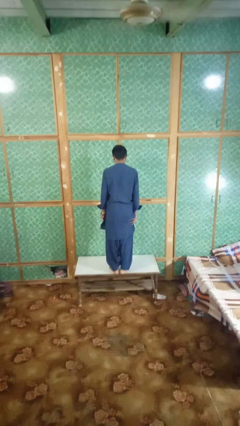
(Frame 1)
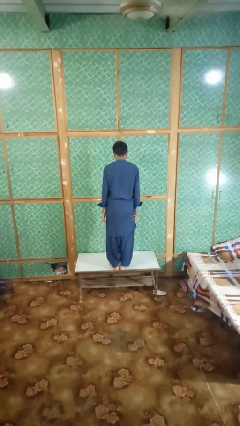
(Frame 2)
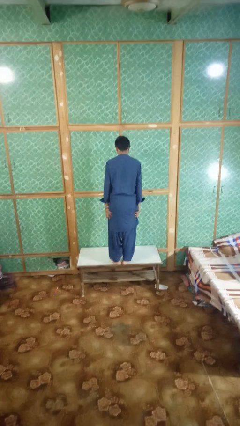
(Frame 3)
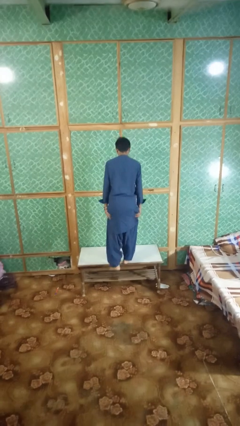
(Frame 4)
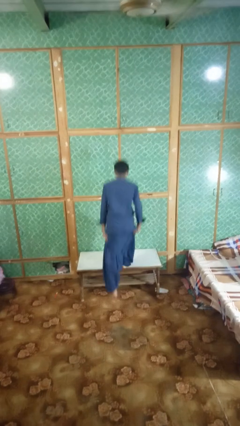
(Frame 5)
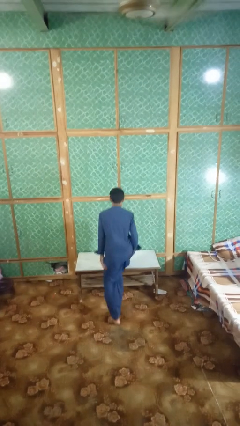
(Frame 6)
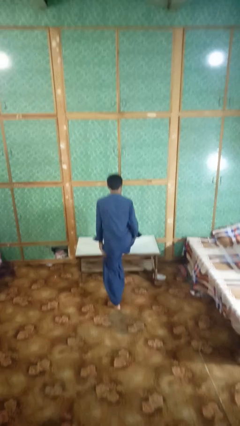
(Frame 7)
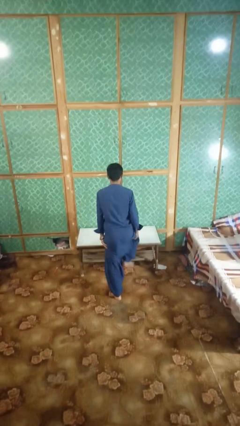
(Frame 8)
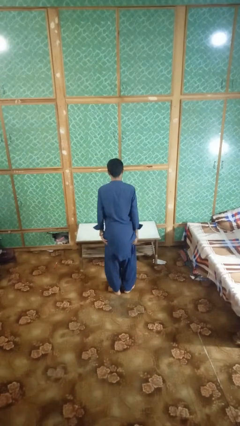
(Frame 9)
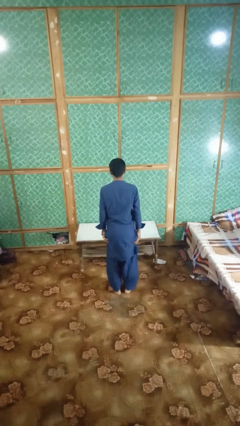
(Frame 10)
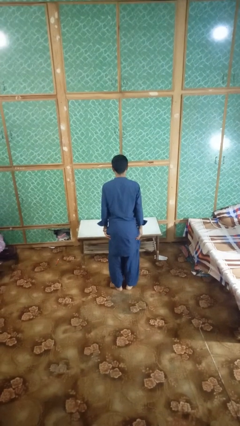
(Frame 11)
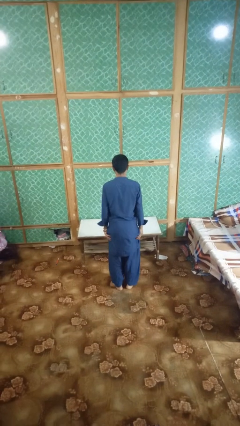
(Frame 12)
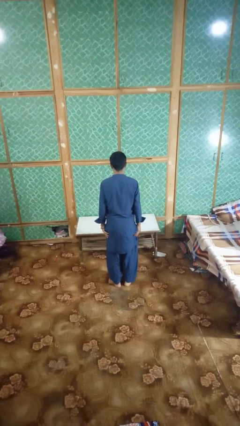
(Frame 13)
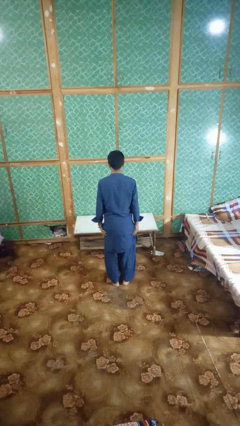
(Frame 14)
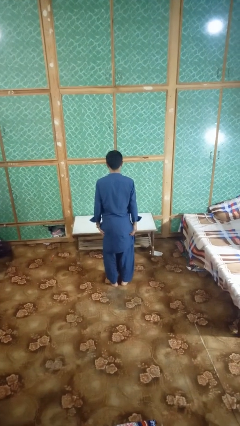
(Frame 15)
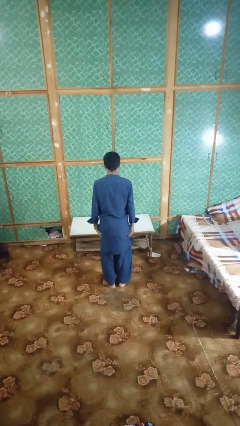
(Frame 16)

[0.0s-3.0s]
person climbs off table

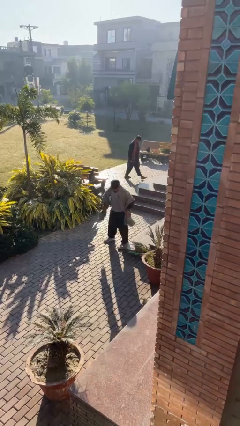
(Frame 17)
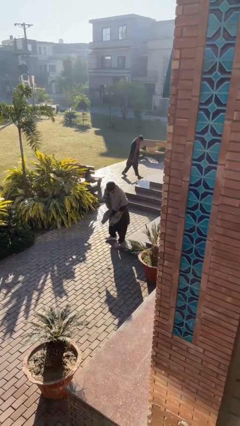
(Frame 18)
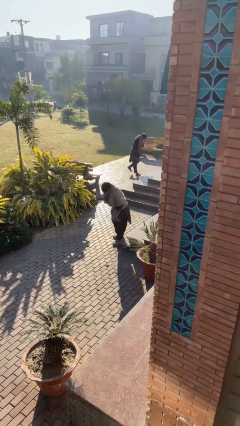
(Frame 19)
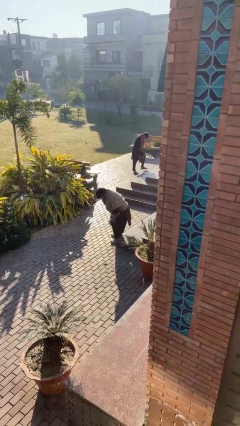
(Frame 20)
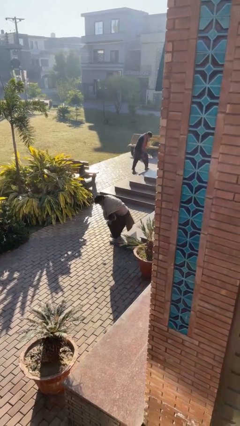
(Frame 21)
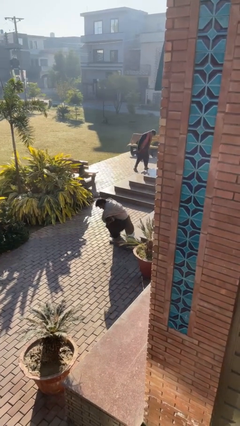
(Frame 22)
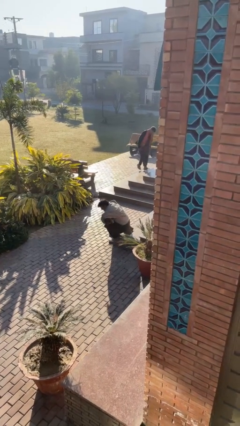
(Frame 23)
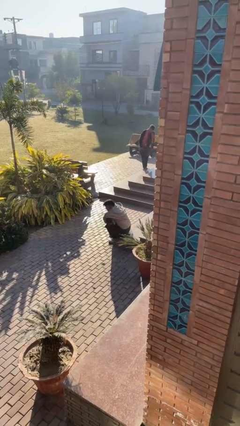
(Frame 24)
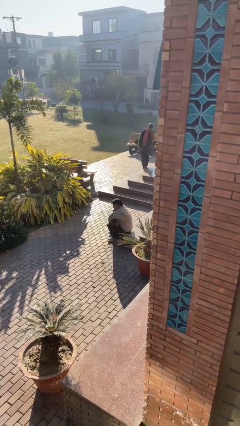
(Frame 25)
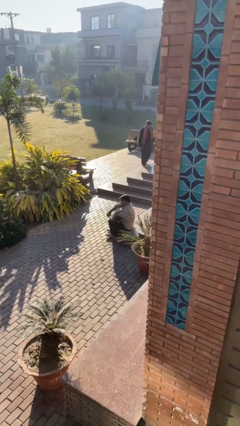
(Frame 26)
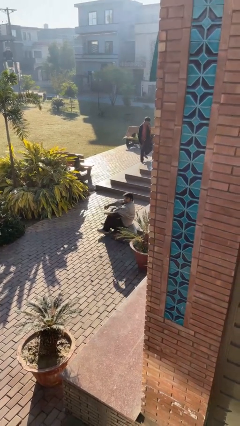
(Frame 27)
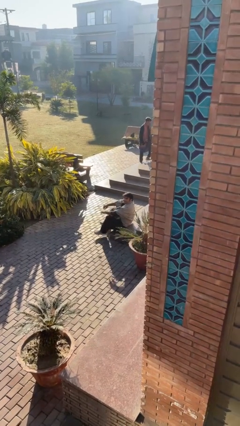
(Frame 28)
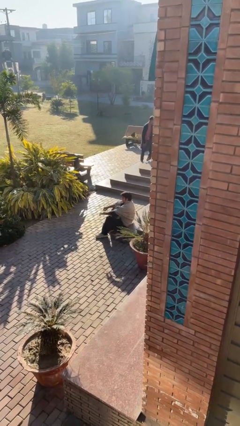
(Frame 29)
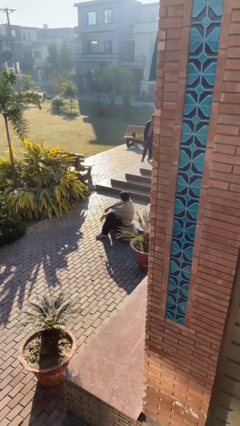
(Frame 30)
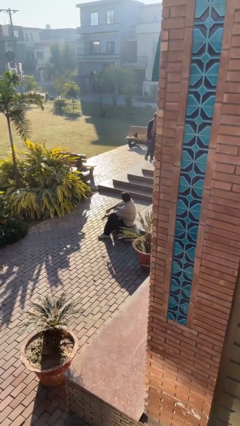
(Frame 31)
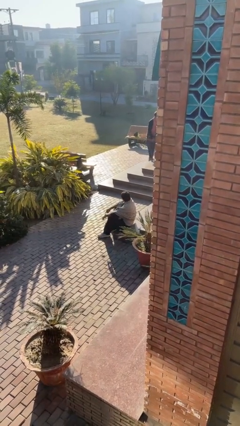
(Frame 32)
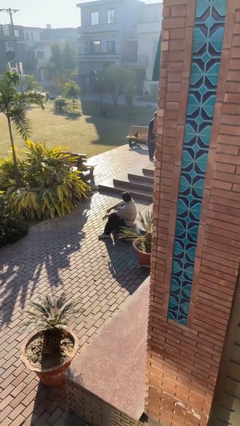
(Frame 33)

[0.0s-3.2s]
person sits down

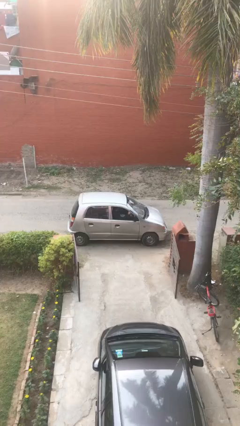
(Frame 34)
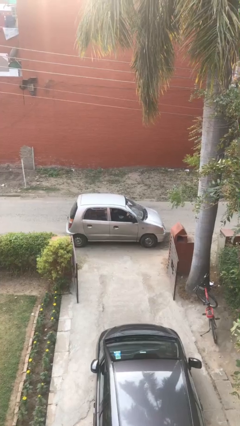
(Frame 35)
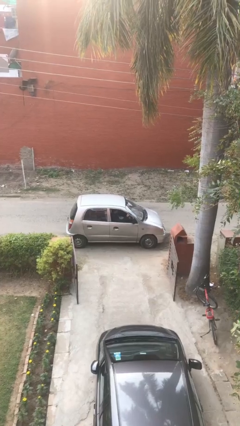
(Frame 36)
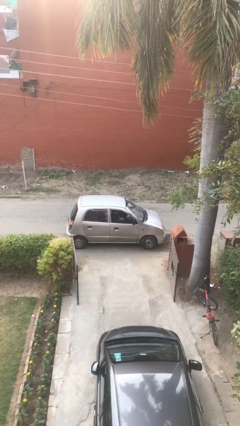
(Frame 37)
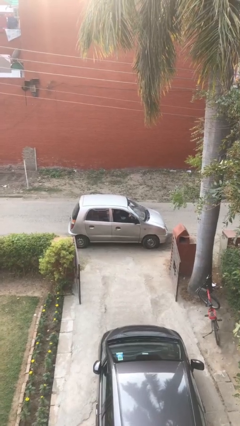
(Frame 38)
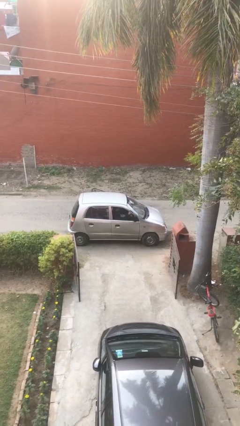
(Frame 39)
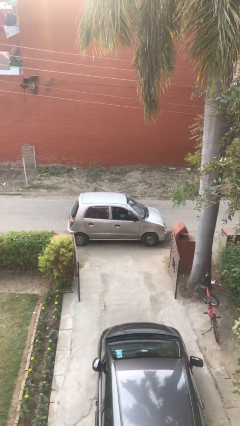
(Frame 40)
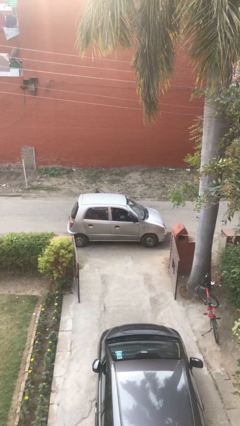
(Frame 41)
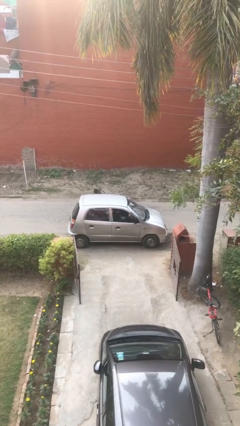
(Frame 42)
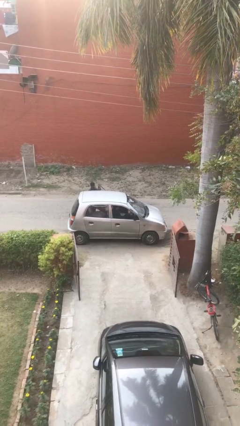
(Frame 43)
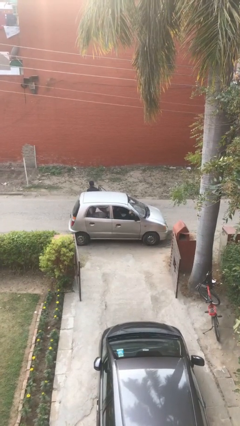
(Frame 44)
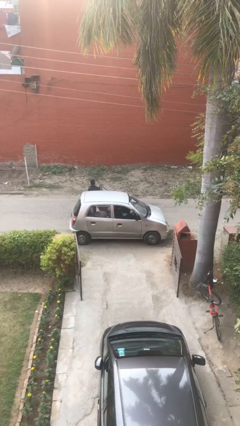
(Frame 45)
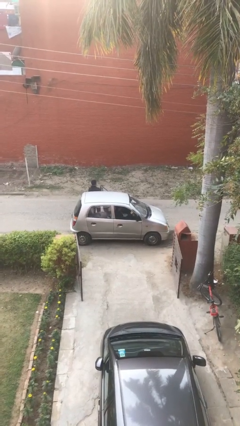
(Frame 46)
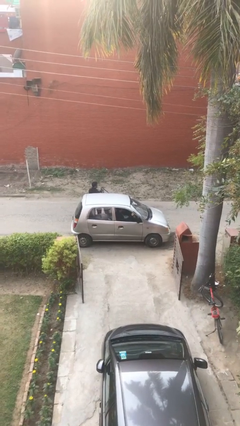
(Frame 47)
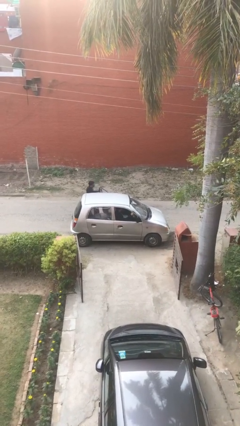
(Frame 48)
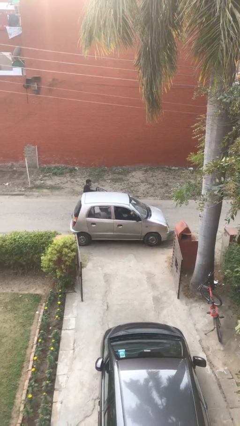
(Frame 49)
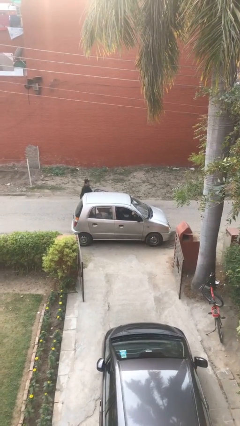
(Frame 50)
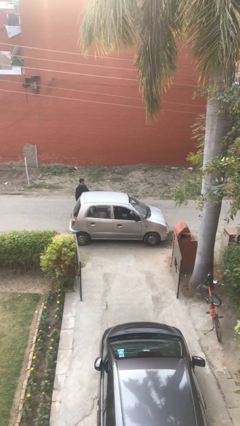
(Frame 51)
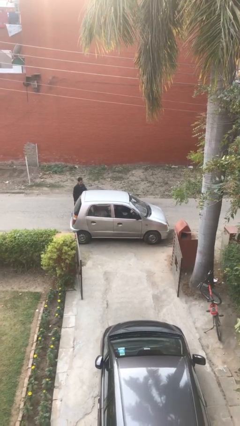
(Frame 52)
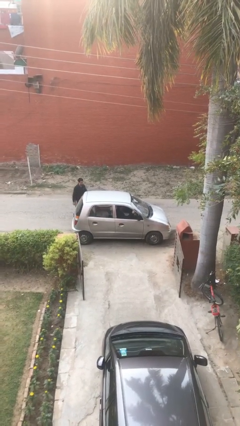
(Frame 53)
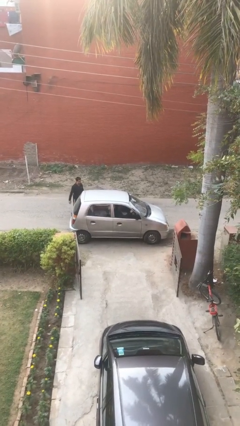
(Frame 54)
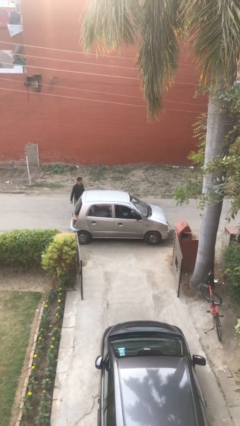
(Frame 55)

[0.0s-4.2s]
car drops off person

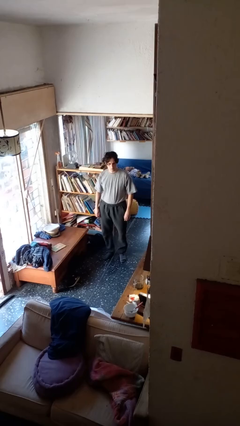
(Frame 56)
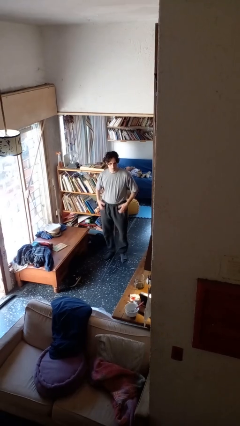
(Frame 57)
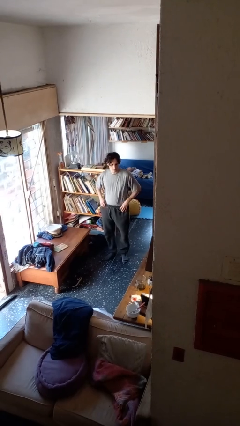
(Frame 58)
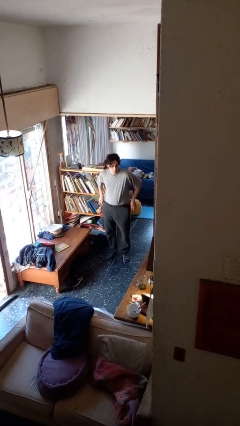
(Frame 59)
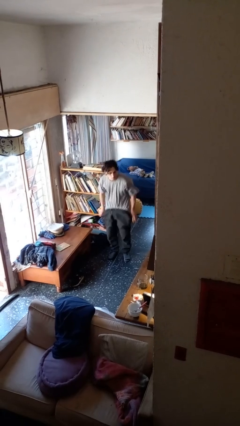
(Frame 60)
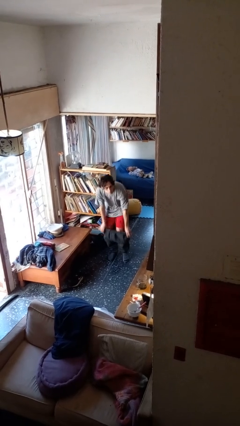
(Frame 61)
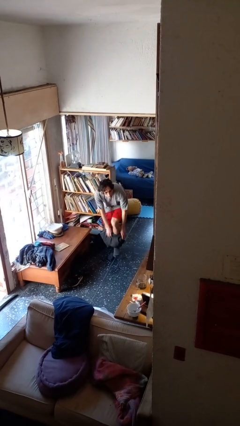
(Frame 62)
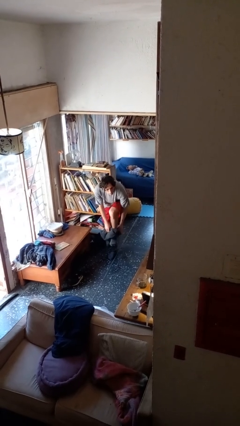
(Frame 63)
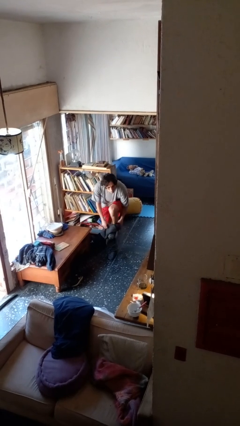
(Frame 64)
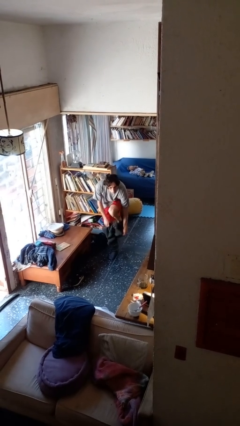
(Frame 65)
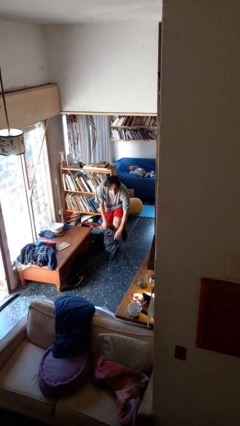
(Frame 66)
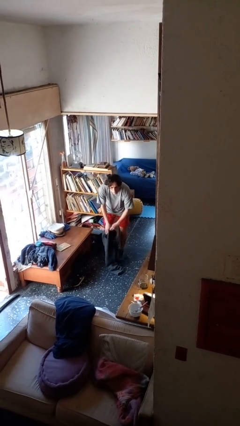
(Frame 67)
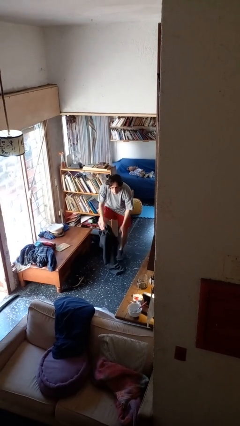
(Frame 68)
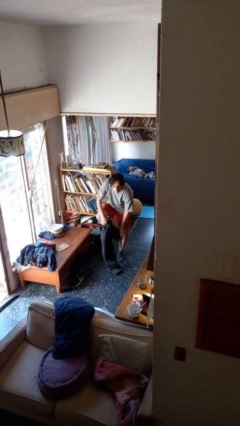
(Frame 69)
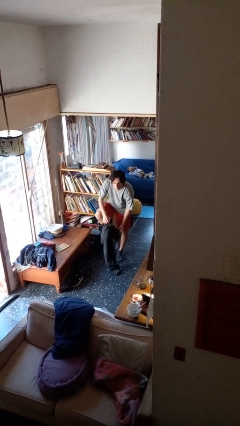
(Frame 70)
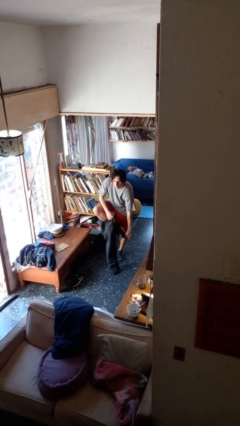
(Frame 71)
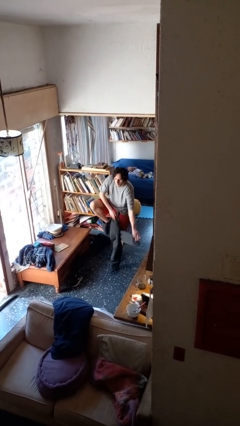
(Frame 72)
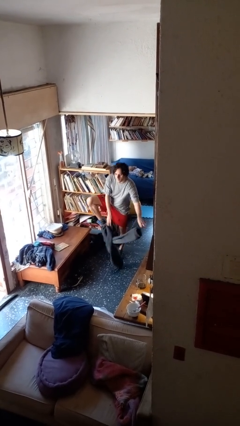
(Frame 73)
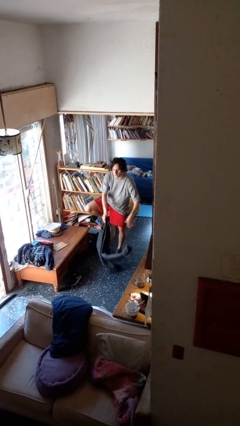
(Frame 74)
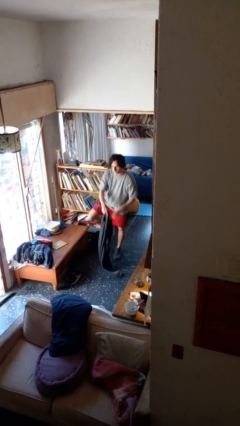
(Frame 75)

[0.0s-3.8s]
person puts on pants

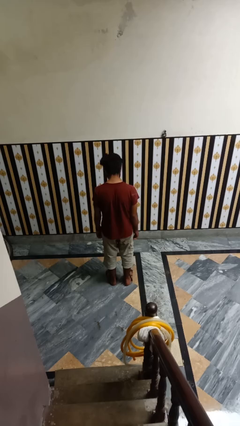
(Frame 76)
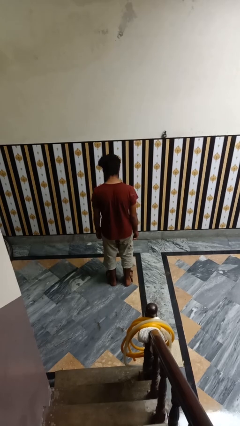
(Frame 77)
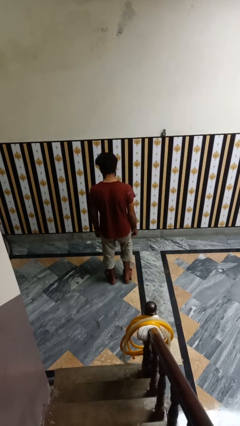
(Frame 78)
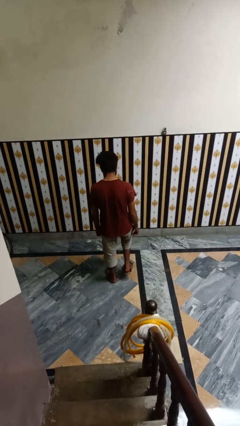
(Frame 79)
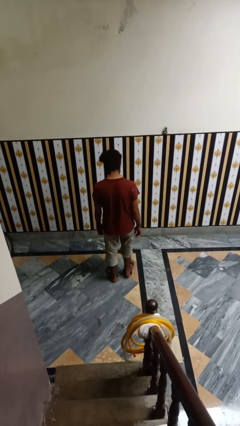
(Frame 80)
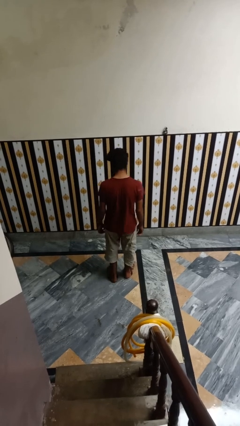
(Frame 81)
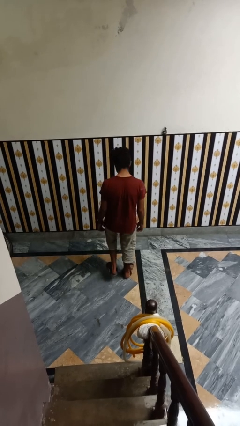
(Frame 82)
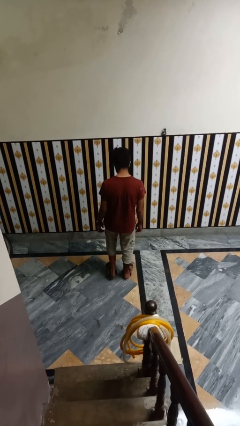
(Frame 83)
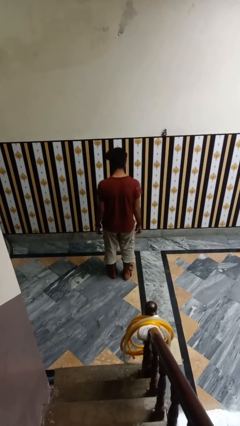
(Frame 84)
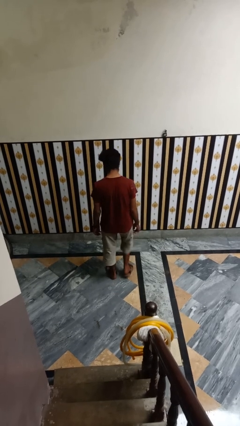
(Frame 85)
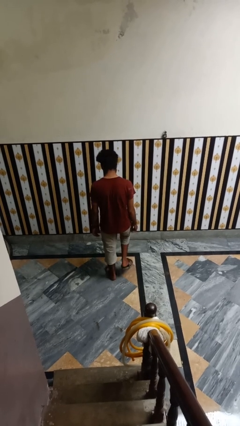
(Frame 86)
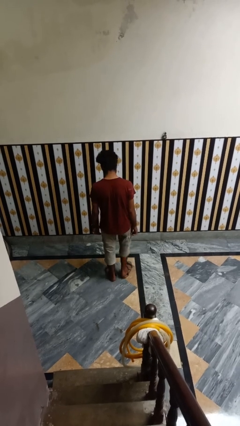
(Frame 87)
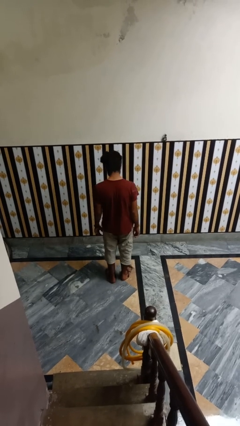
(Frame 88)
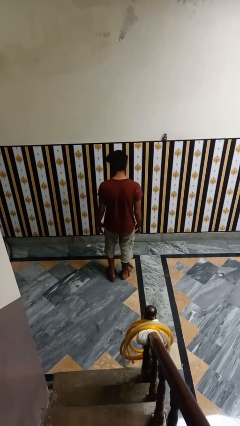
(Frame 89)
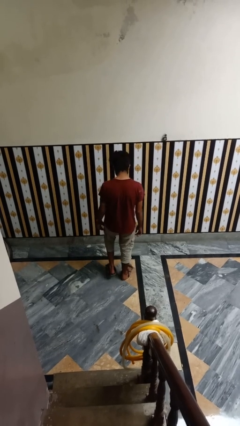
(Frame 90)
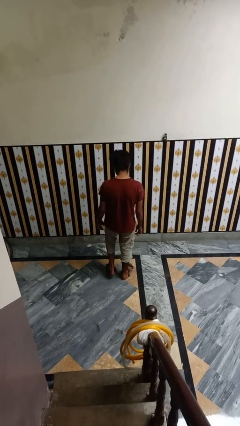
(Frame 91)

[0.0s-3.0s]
person walks tiptoe

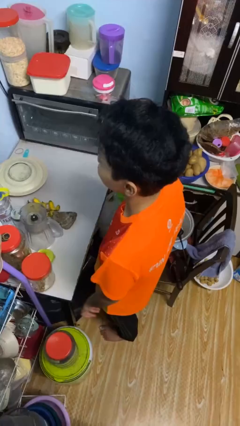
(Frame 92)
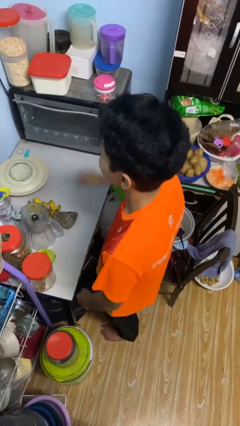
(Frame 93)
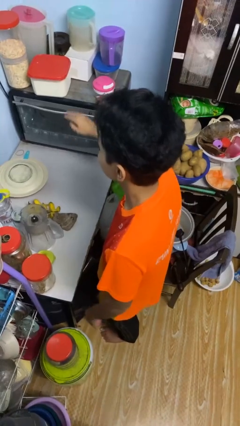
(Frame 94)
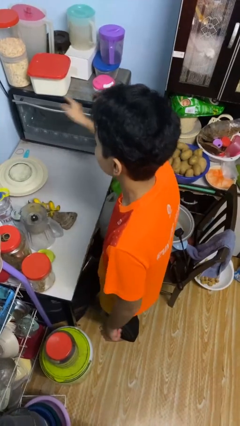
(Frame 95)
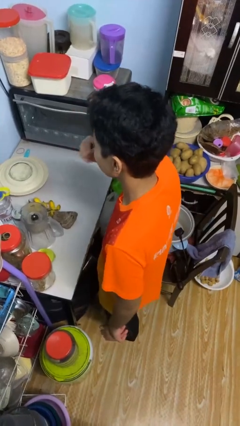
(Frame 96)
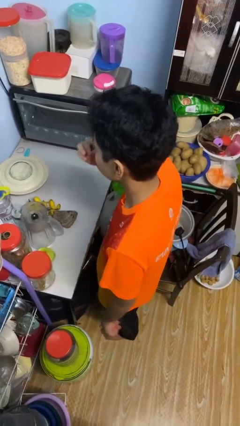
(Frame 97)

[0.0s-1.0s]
person burns hand
